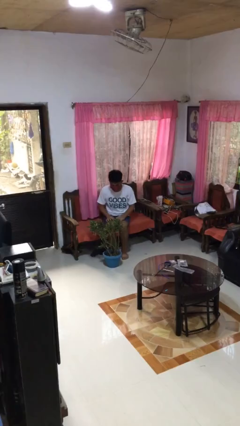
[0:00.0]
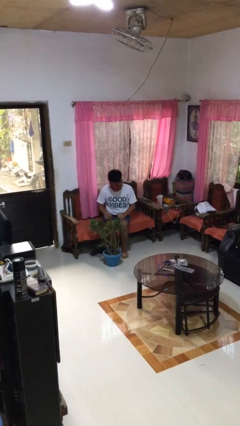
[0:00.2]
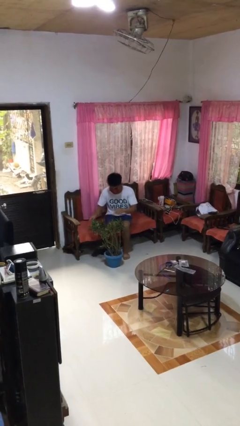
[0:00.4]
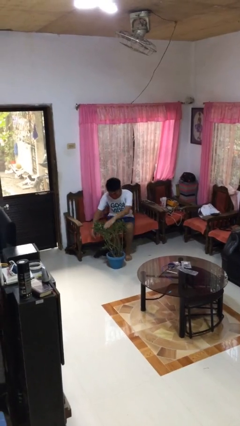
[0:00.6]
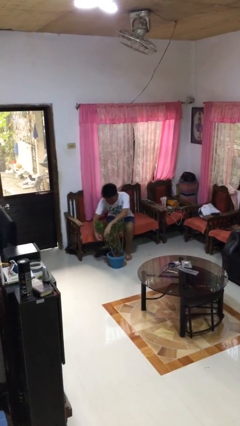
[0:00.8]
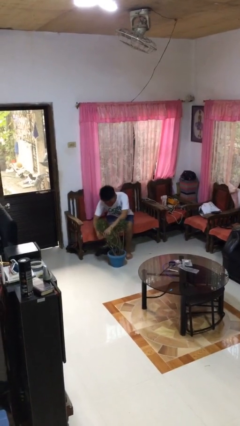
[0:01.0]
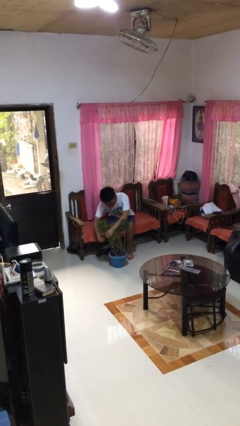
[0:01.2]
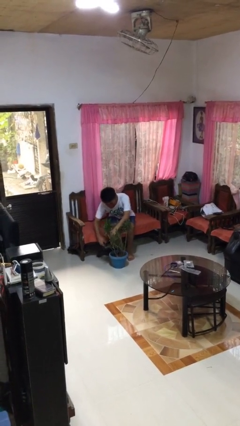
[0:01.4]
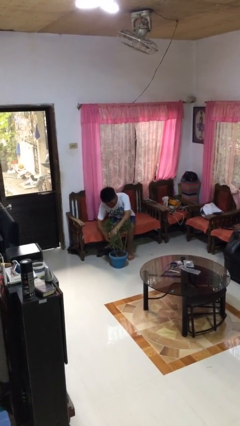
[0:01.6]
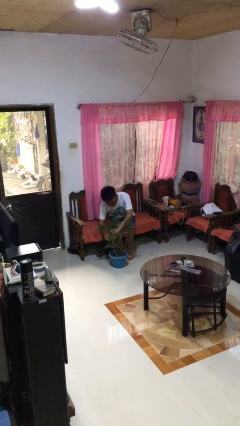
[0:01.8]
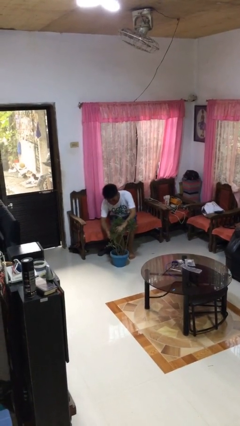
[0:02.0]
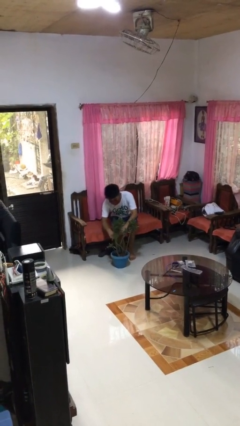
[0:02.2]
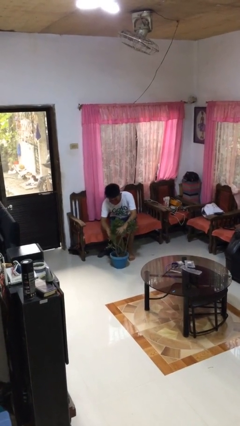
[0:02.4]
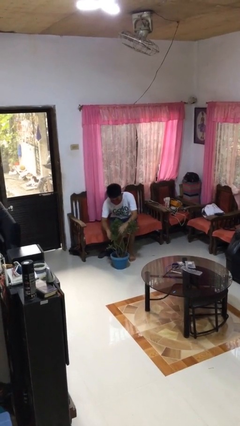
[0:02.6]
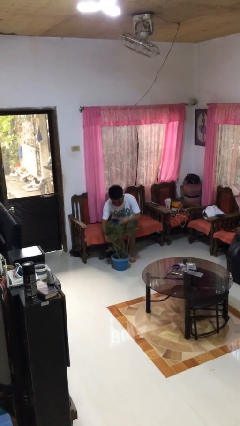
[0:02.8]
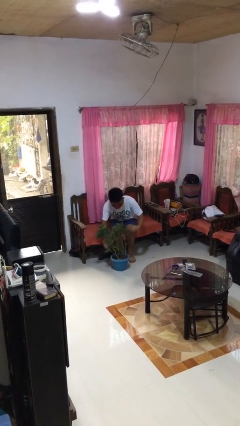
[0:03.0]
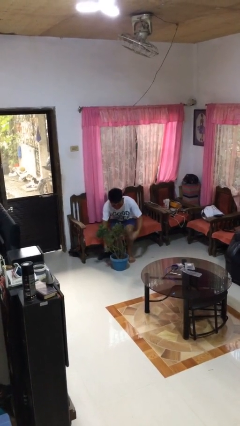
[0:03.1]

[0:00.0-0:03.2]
person arranges flowers in vase

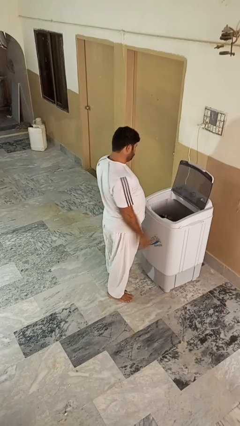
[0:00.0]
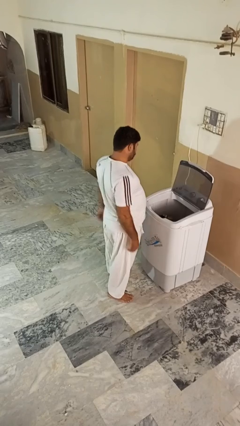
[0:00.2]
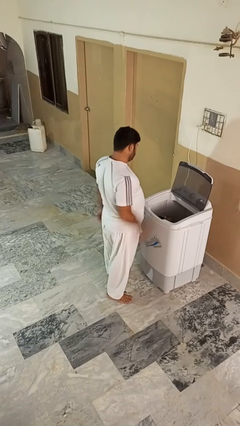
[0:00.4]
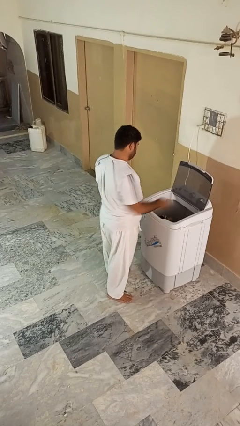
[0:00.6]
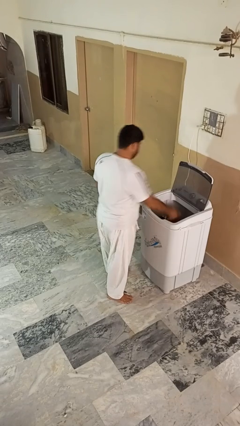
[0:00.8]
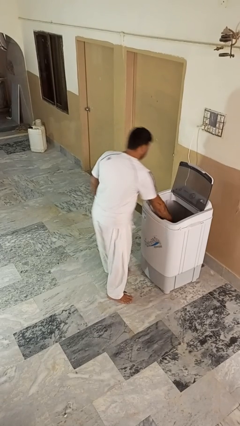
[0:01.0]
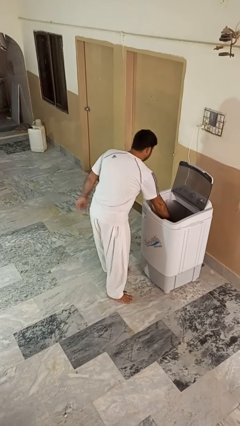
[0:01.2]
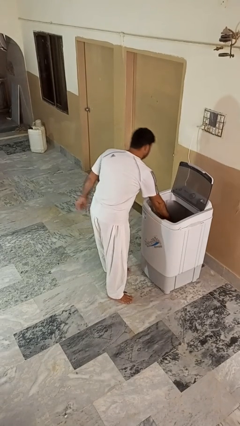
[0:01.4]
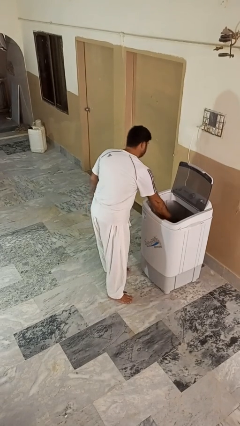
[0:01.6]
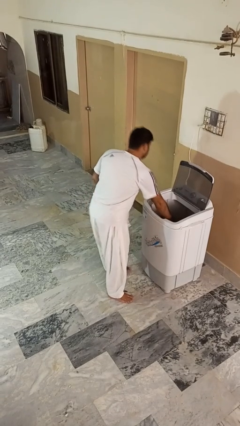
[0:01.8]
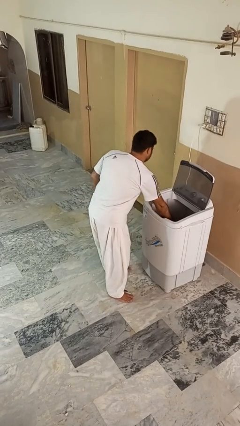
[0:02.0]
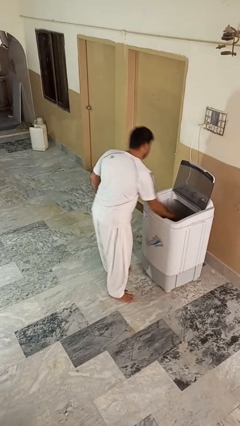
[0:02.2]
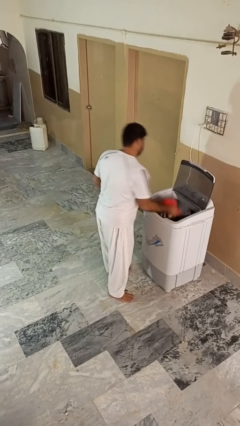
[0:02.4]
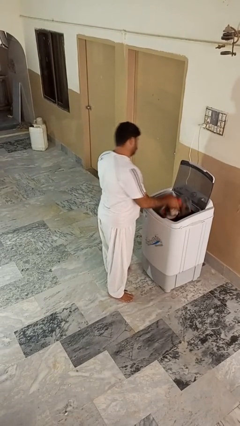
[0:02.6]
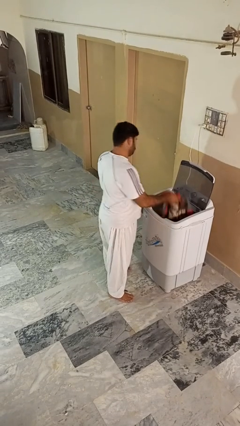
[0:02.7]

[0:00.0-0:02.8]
person unloads clotheswasher

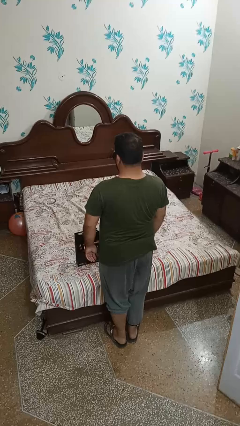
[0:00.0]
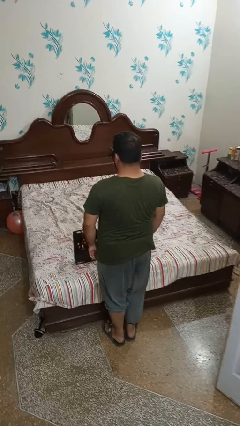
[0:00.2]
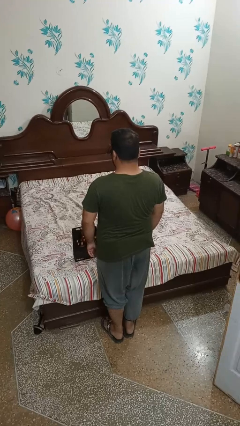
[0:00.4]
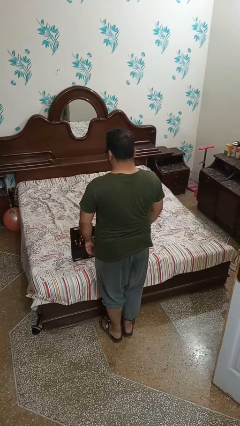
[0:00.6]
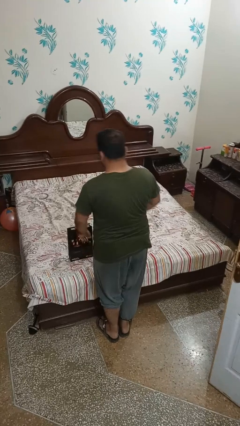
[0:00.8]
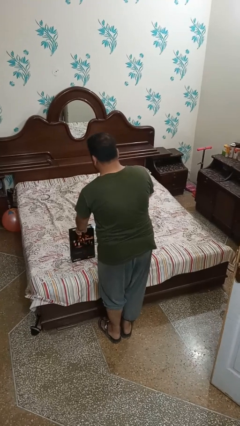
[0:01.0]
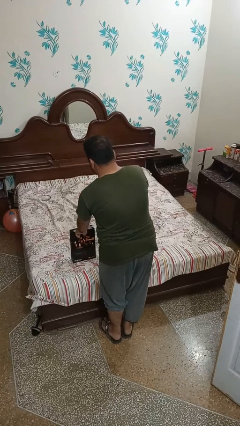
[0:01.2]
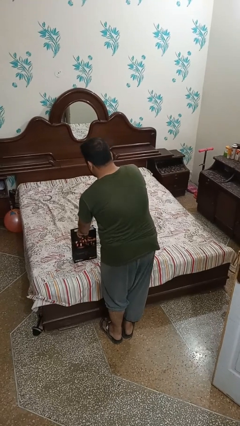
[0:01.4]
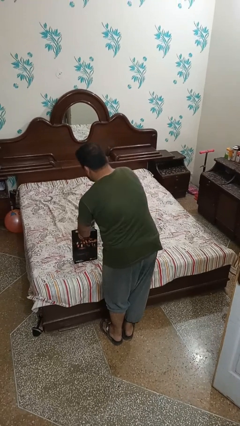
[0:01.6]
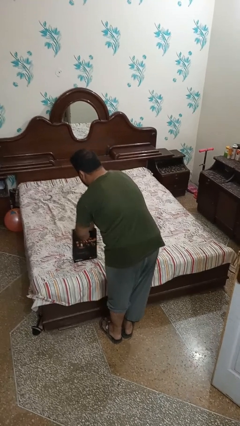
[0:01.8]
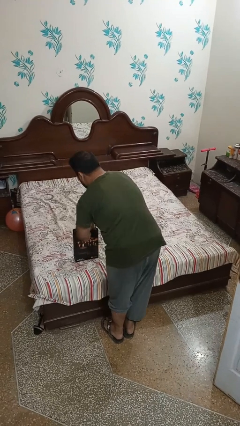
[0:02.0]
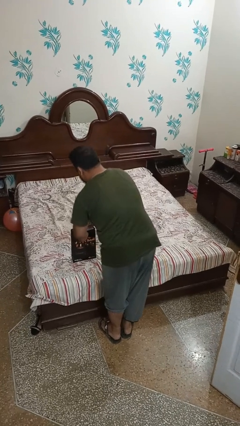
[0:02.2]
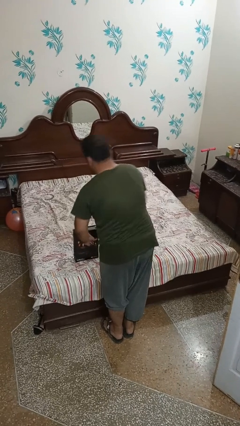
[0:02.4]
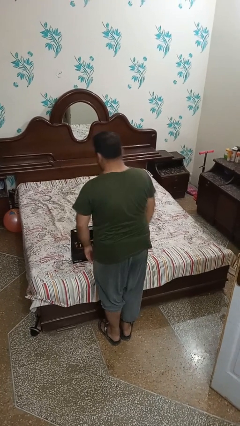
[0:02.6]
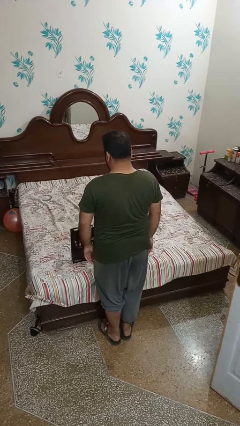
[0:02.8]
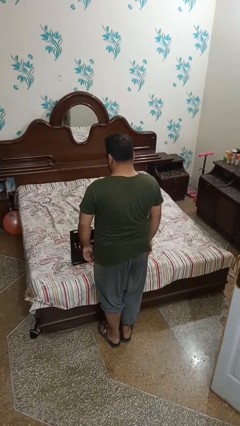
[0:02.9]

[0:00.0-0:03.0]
person puts object into bag

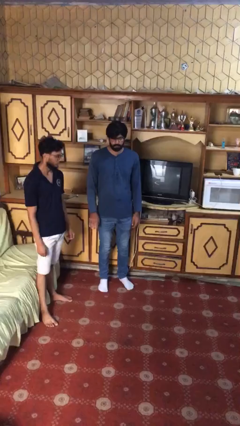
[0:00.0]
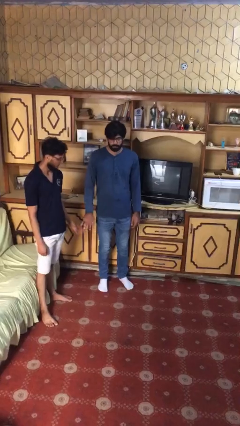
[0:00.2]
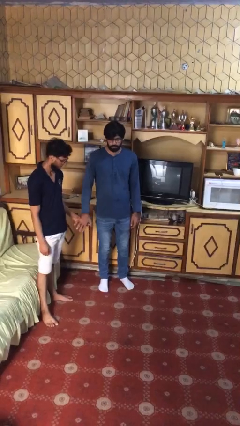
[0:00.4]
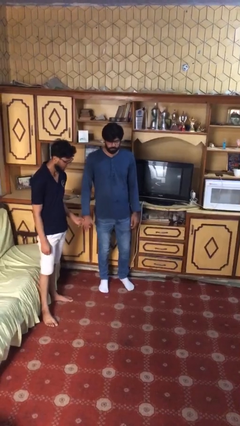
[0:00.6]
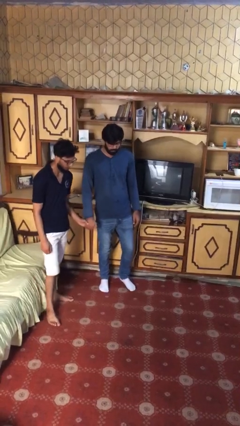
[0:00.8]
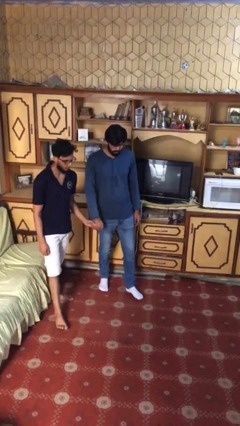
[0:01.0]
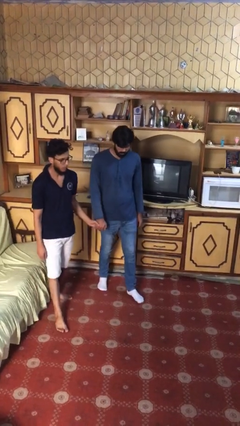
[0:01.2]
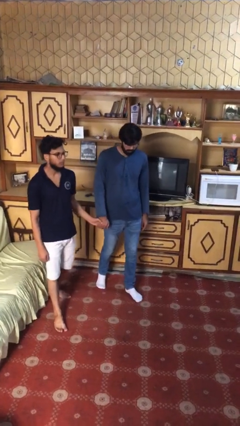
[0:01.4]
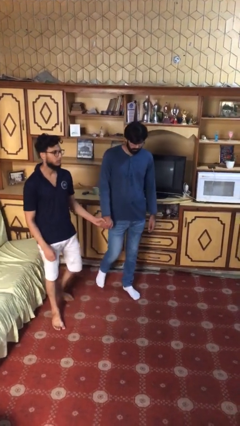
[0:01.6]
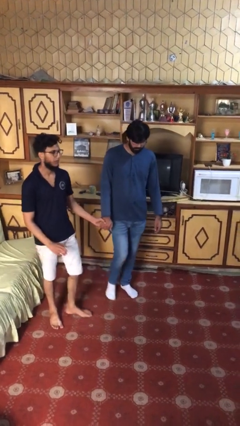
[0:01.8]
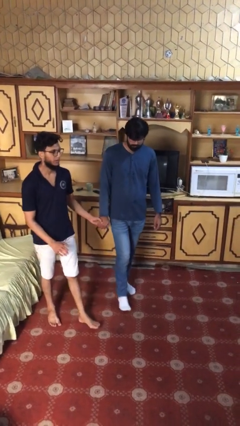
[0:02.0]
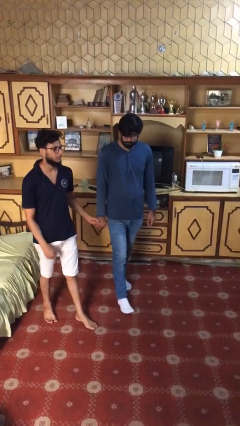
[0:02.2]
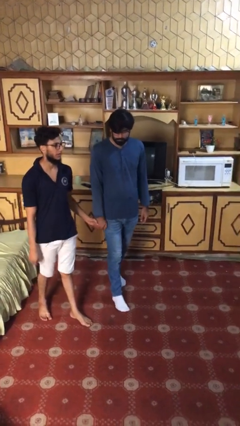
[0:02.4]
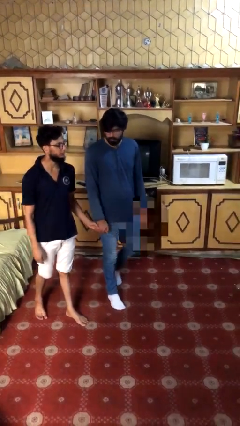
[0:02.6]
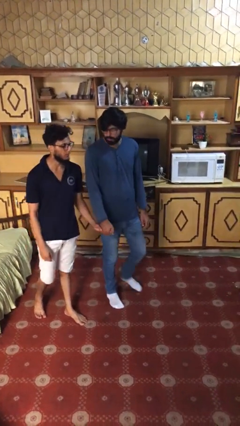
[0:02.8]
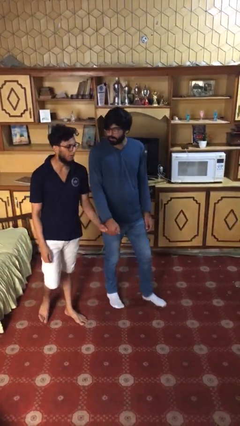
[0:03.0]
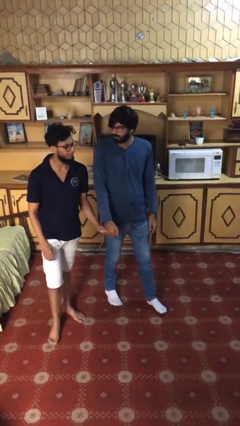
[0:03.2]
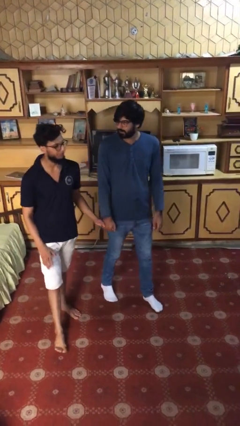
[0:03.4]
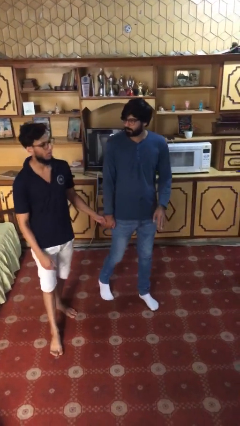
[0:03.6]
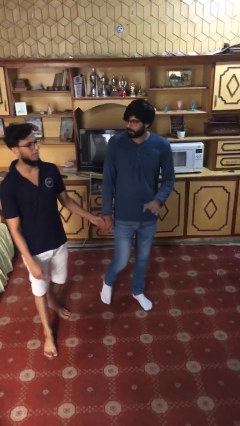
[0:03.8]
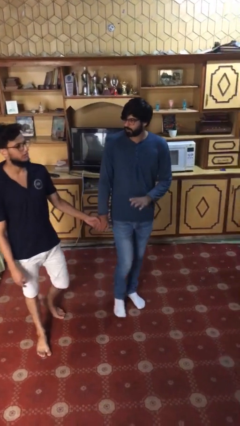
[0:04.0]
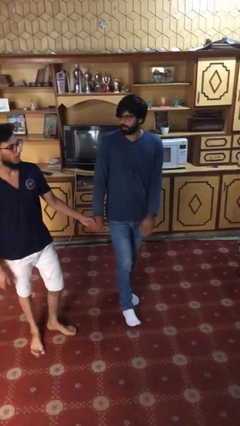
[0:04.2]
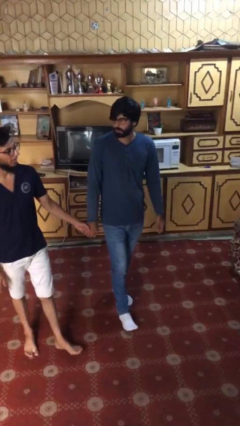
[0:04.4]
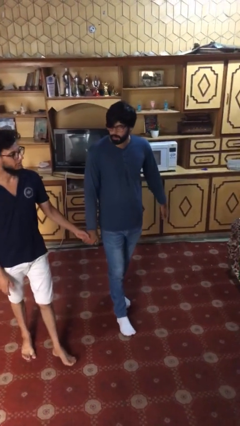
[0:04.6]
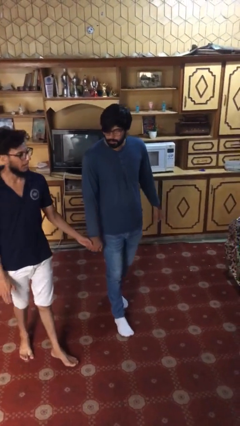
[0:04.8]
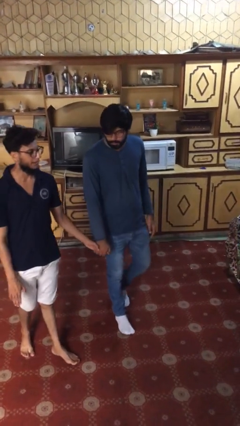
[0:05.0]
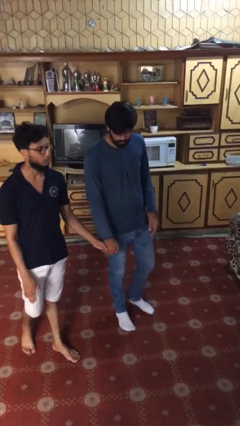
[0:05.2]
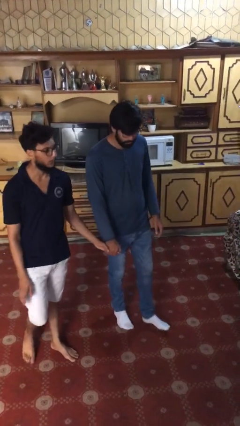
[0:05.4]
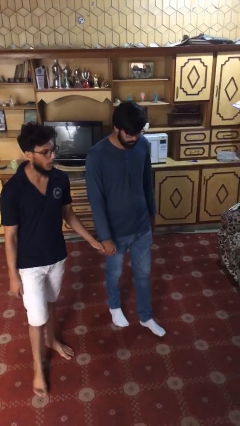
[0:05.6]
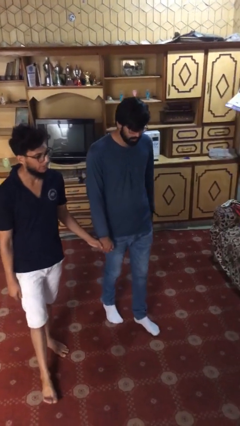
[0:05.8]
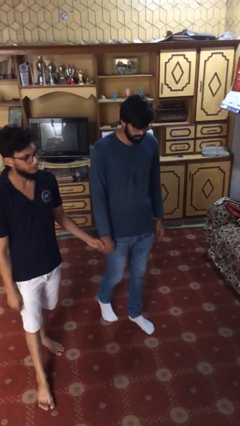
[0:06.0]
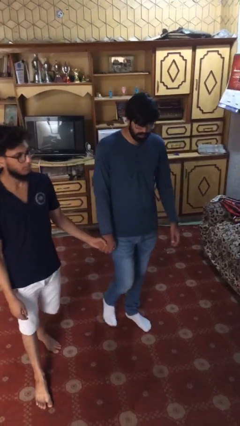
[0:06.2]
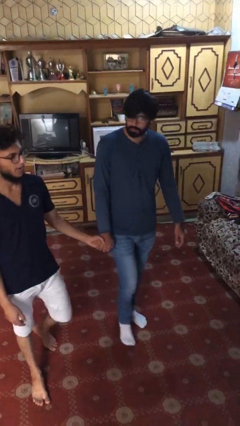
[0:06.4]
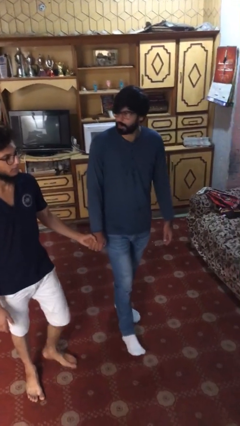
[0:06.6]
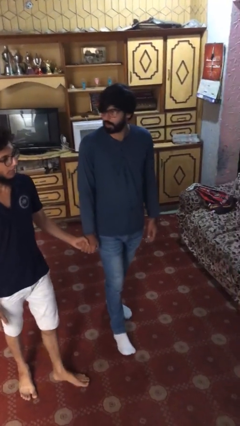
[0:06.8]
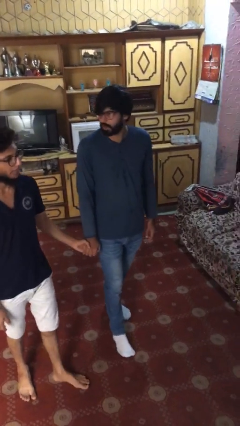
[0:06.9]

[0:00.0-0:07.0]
person holds hand

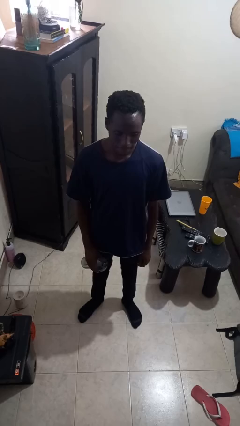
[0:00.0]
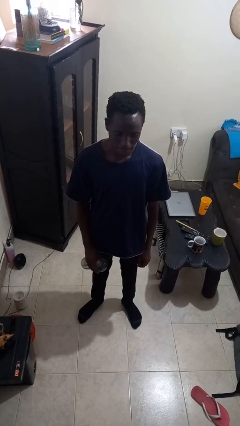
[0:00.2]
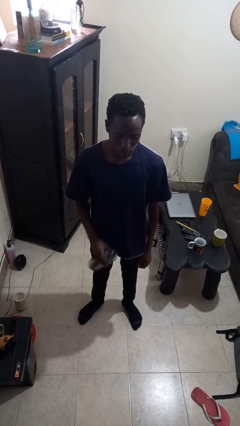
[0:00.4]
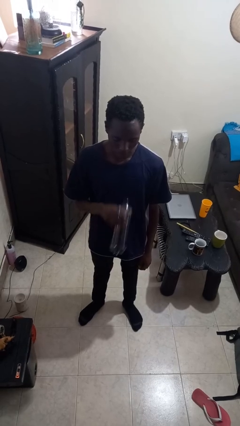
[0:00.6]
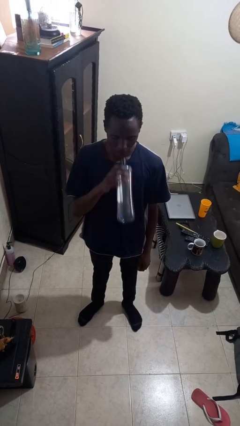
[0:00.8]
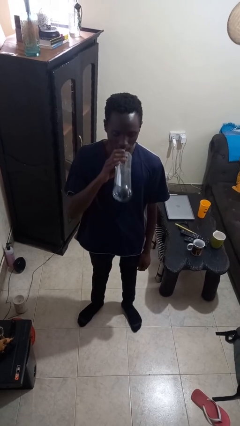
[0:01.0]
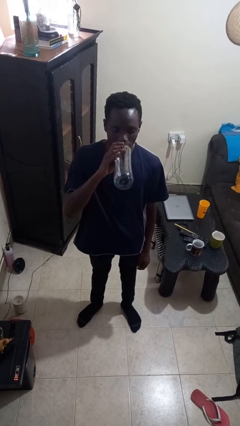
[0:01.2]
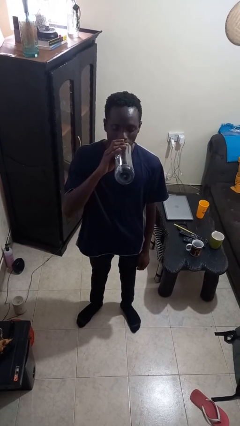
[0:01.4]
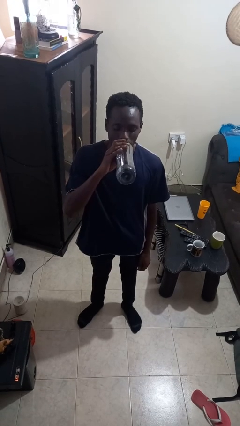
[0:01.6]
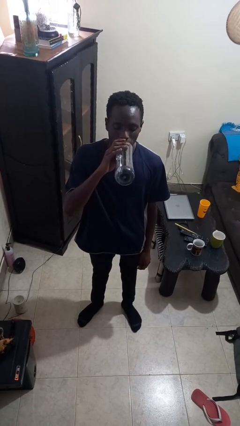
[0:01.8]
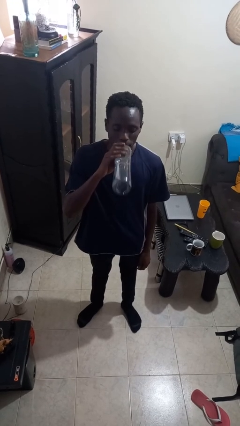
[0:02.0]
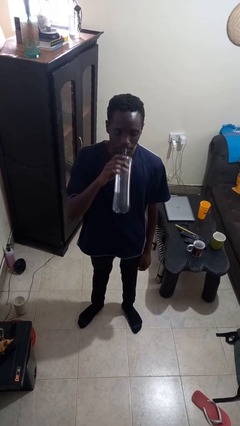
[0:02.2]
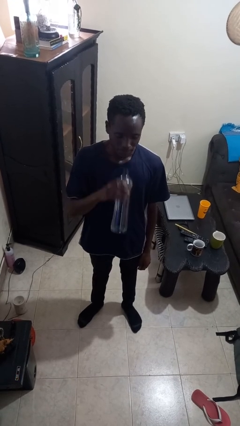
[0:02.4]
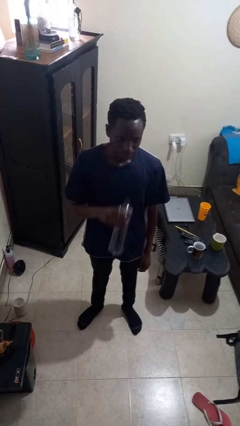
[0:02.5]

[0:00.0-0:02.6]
person drinks from bottle
